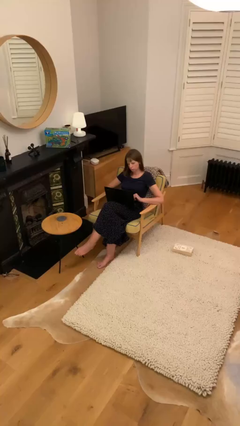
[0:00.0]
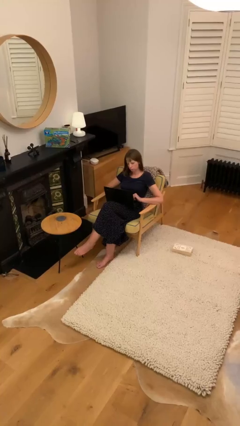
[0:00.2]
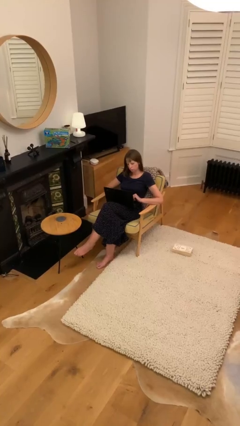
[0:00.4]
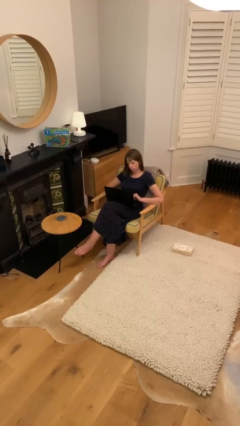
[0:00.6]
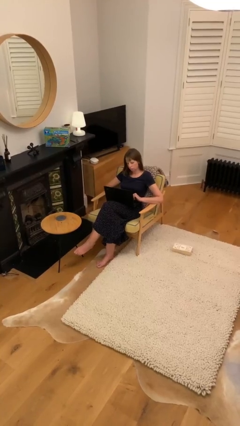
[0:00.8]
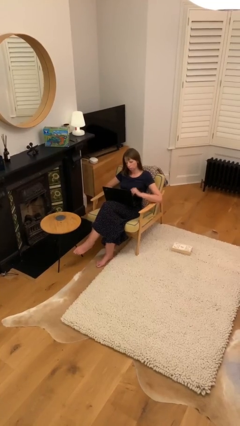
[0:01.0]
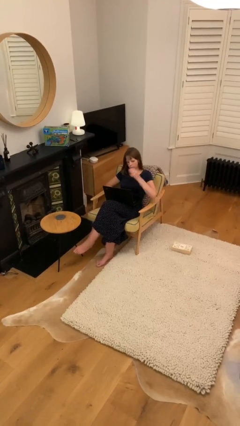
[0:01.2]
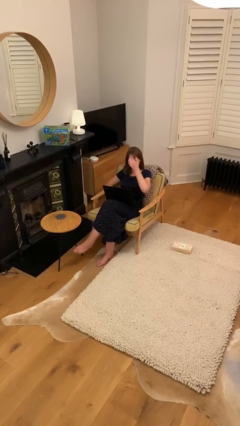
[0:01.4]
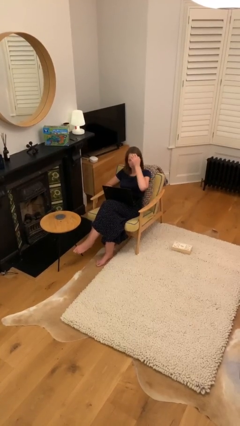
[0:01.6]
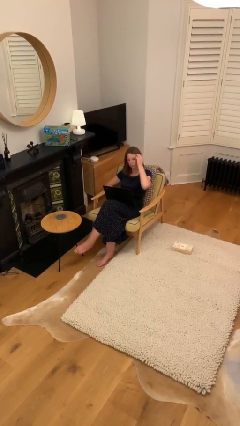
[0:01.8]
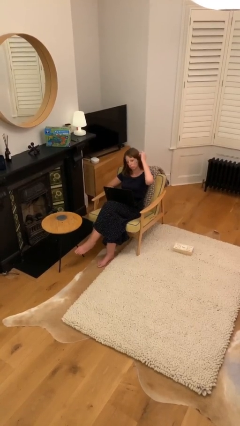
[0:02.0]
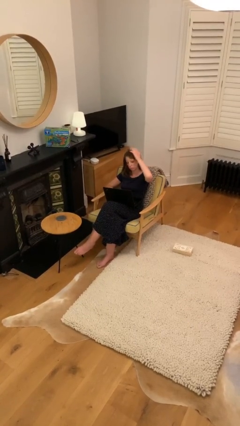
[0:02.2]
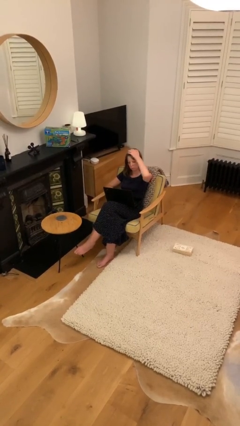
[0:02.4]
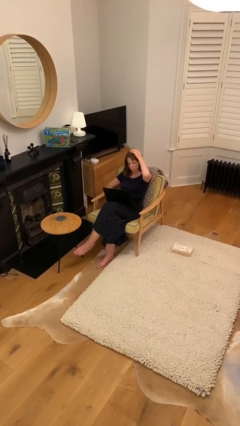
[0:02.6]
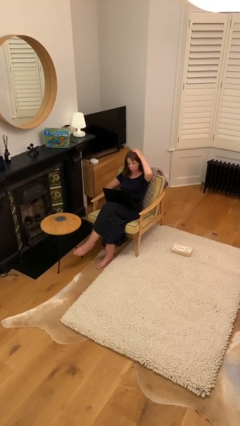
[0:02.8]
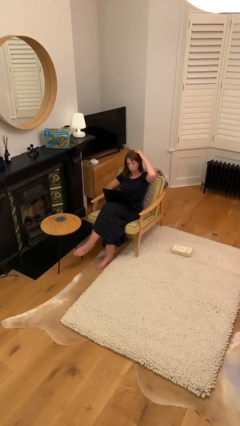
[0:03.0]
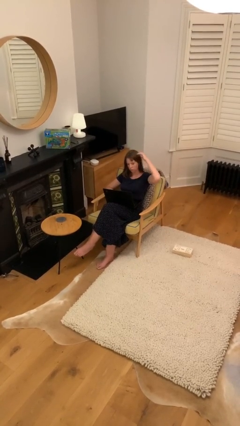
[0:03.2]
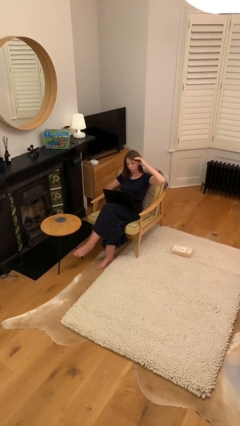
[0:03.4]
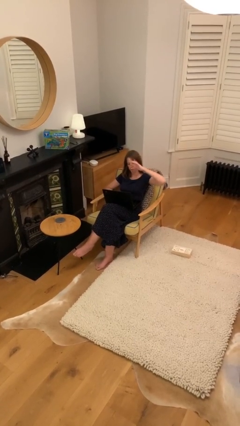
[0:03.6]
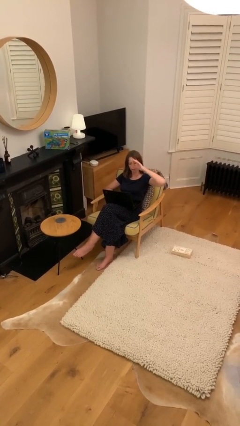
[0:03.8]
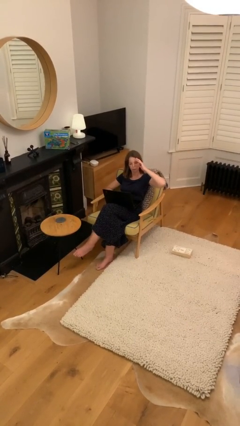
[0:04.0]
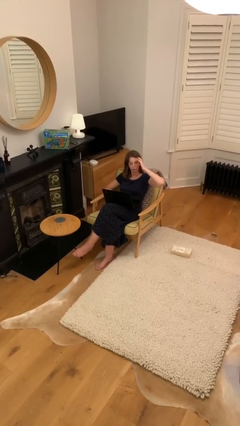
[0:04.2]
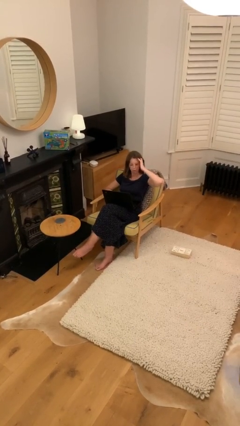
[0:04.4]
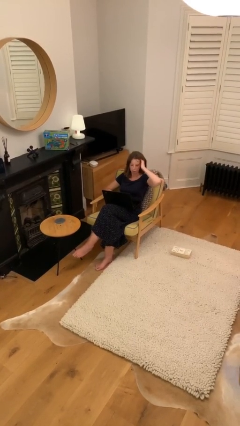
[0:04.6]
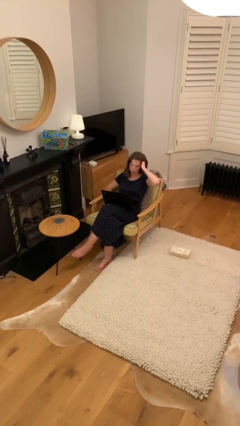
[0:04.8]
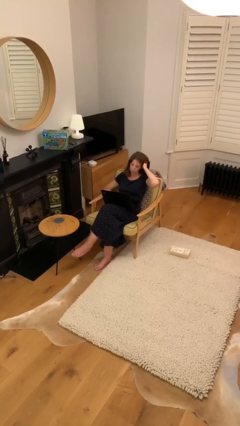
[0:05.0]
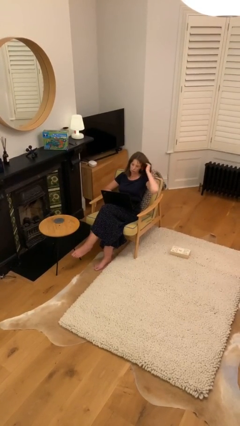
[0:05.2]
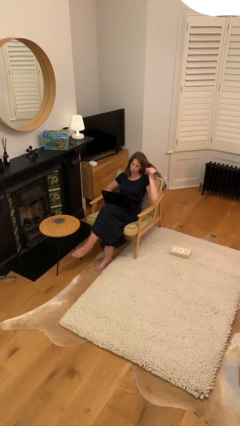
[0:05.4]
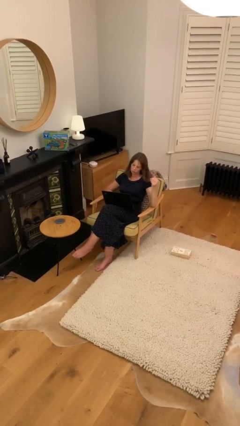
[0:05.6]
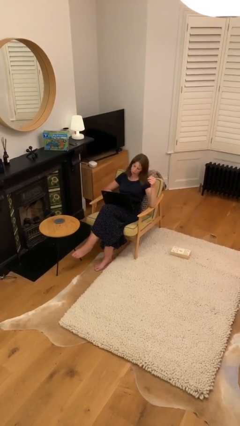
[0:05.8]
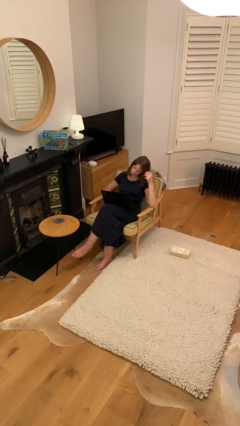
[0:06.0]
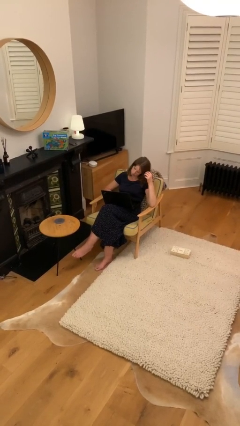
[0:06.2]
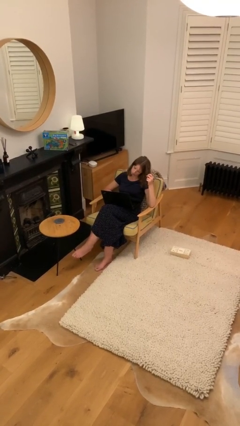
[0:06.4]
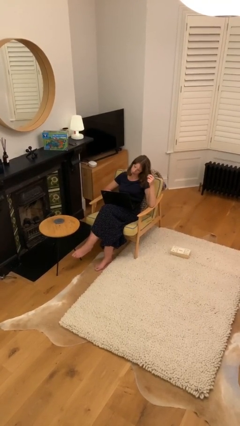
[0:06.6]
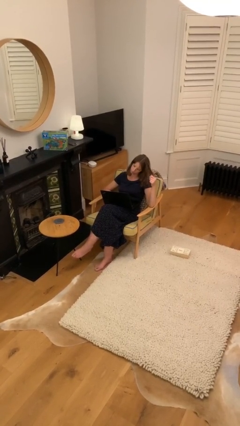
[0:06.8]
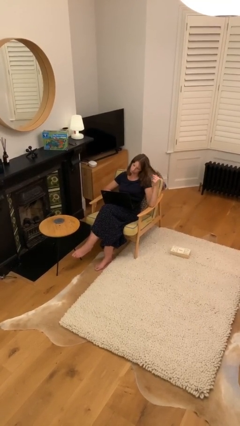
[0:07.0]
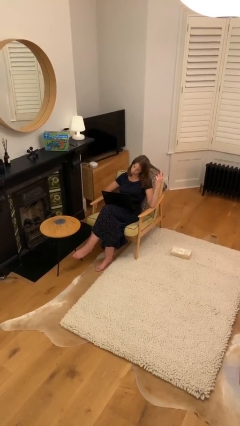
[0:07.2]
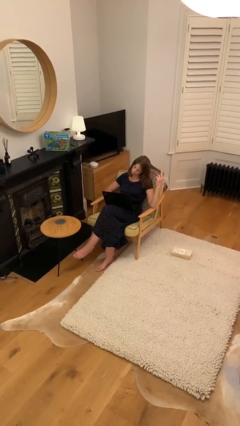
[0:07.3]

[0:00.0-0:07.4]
person interacts with laptop

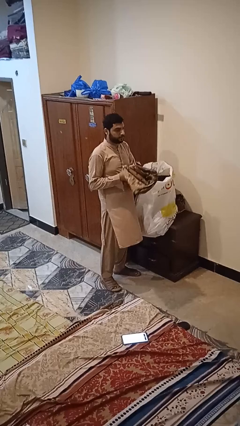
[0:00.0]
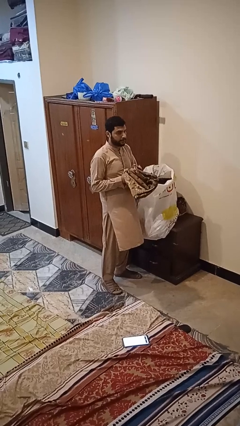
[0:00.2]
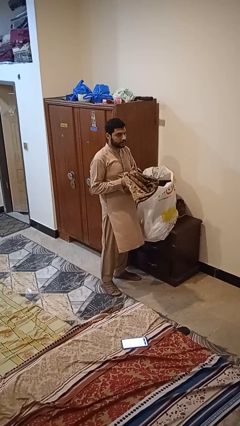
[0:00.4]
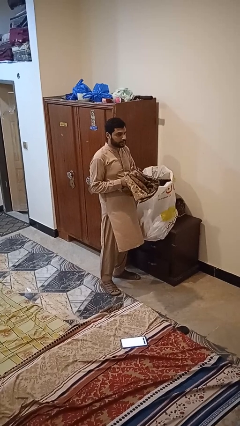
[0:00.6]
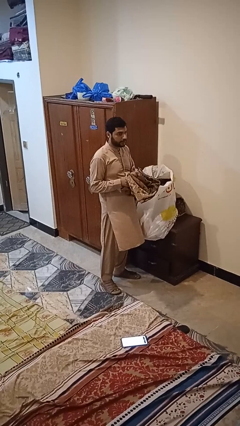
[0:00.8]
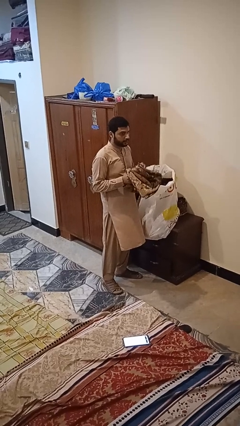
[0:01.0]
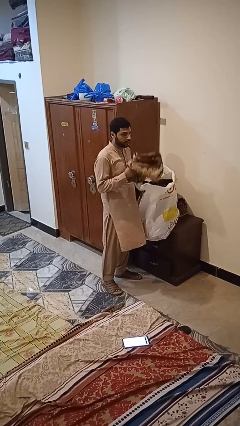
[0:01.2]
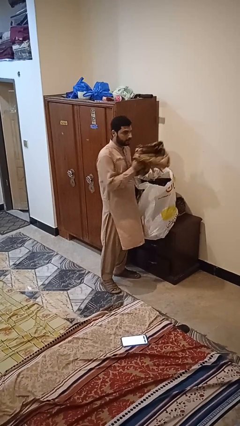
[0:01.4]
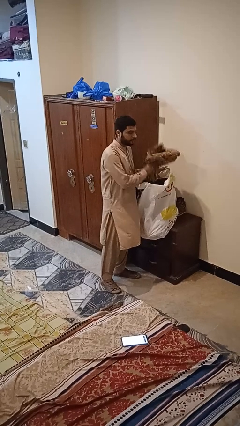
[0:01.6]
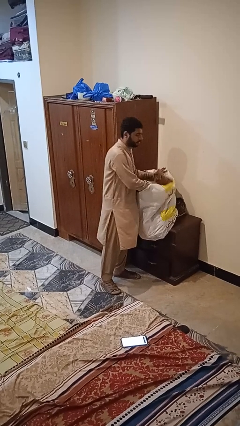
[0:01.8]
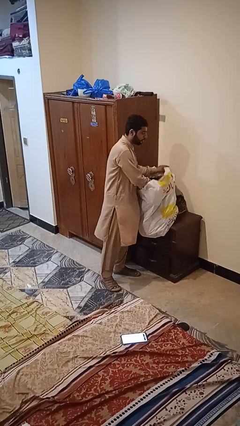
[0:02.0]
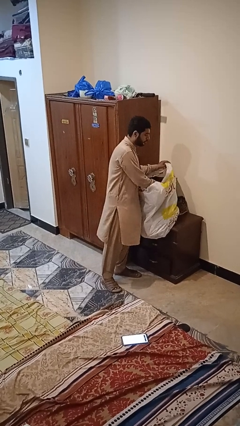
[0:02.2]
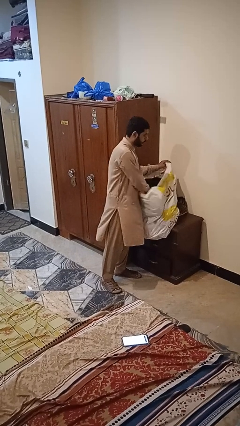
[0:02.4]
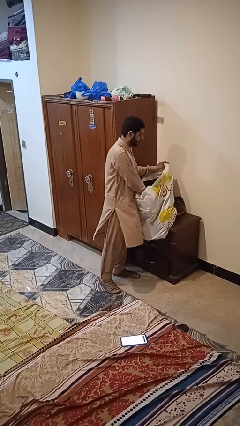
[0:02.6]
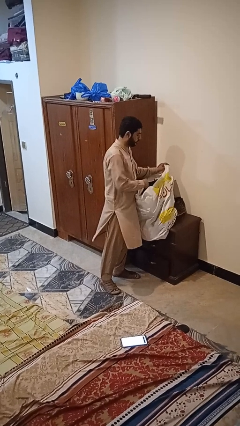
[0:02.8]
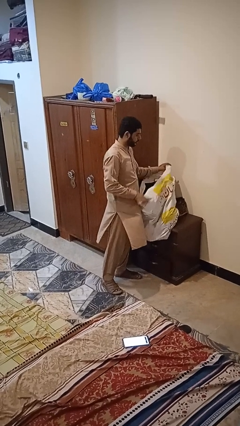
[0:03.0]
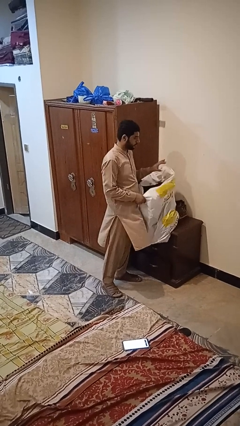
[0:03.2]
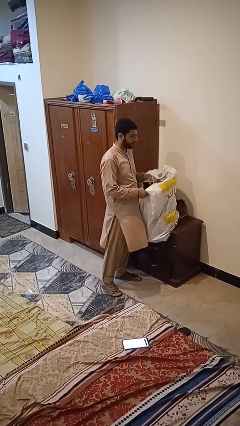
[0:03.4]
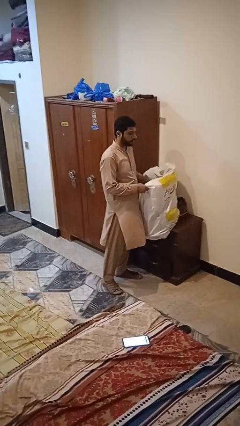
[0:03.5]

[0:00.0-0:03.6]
person puts object into bag

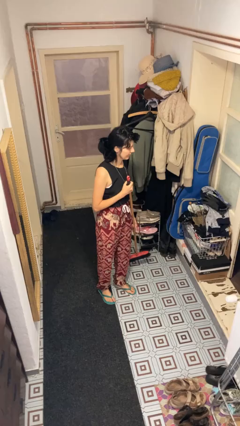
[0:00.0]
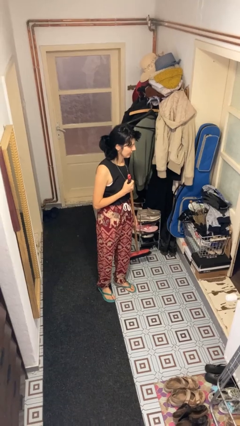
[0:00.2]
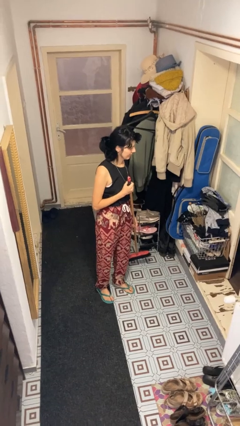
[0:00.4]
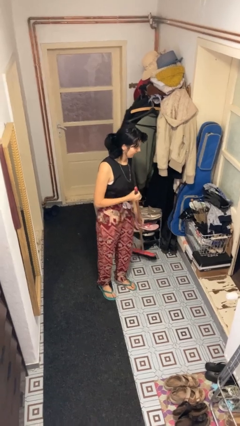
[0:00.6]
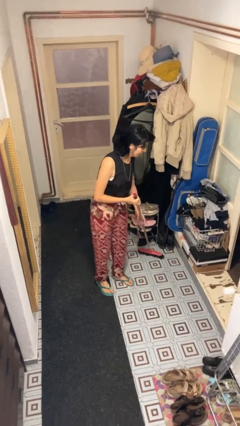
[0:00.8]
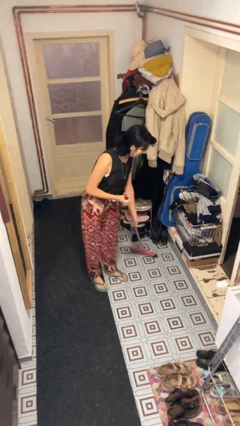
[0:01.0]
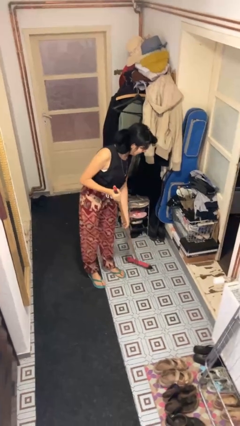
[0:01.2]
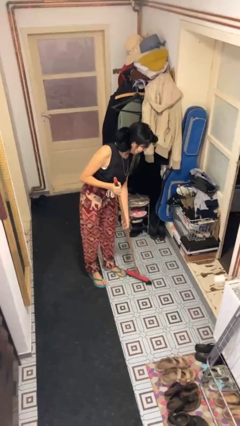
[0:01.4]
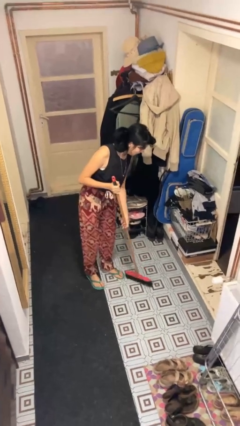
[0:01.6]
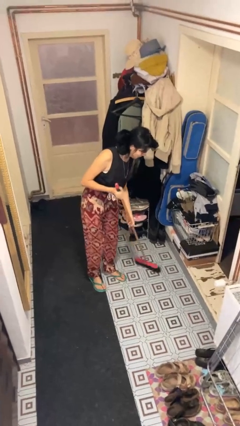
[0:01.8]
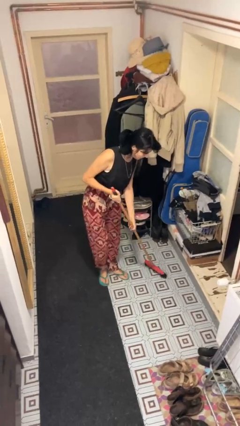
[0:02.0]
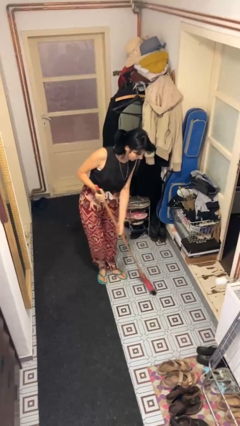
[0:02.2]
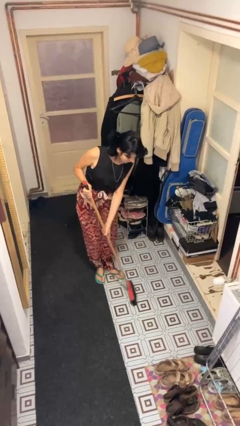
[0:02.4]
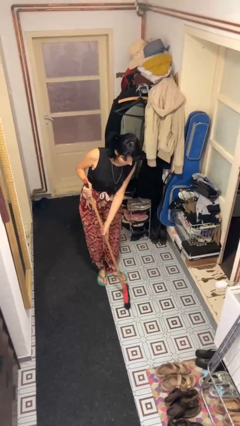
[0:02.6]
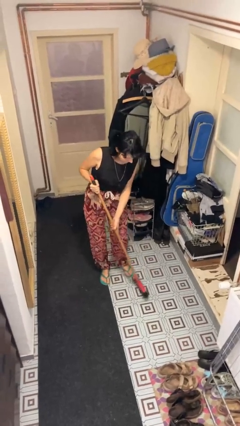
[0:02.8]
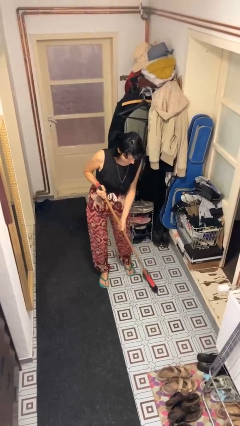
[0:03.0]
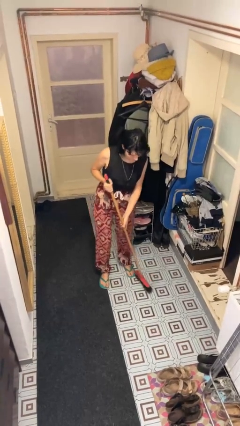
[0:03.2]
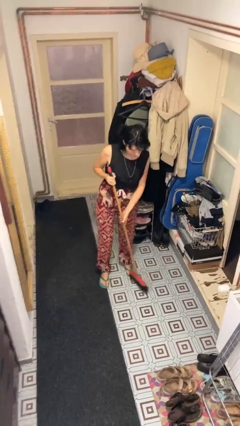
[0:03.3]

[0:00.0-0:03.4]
person sweeps floor

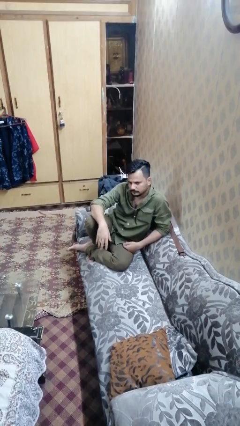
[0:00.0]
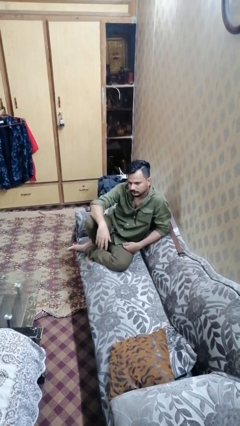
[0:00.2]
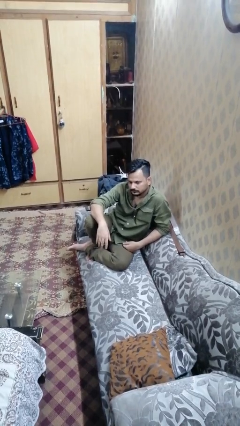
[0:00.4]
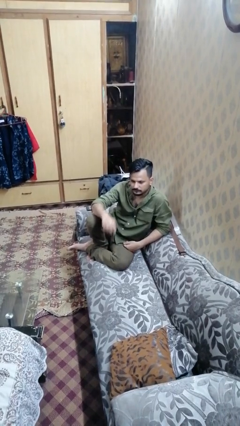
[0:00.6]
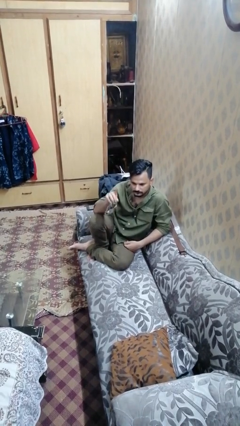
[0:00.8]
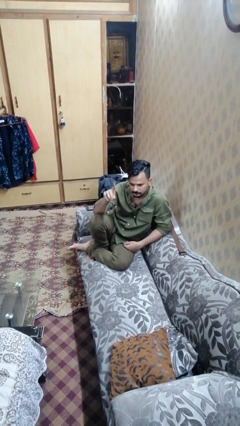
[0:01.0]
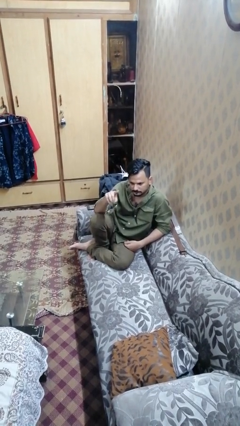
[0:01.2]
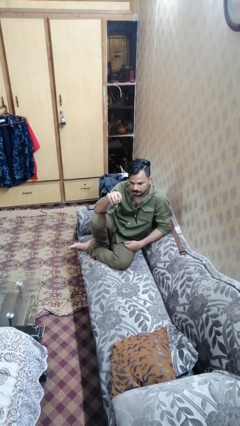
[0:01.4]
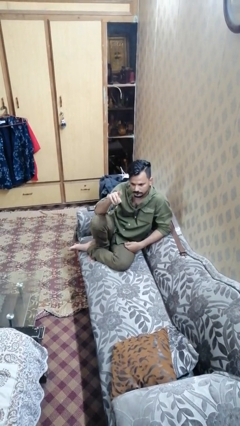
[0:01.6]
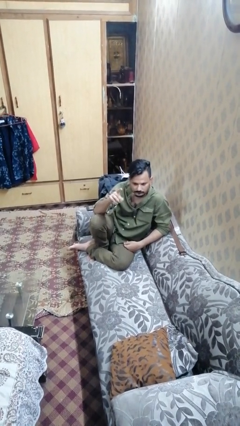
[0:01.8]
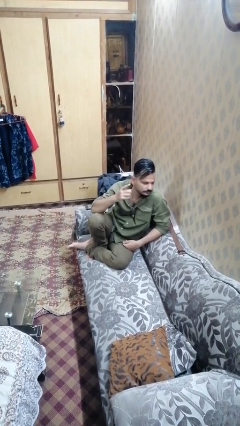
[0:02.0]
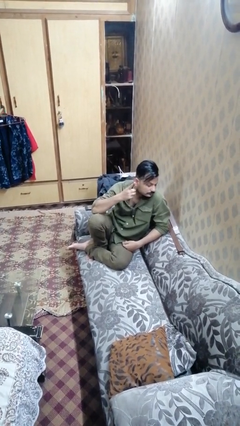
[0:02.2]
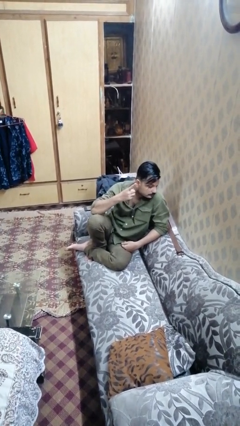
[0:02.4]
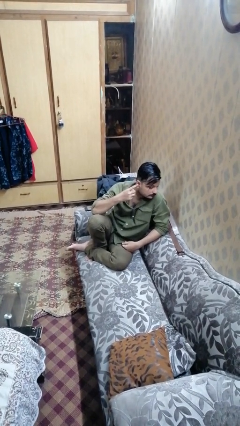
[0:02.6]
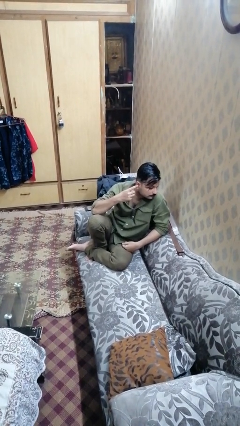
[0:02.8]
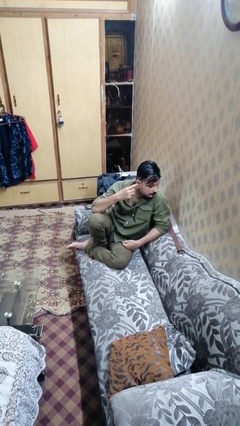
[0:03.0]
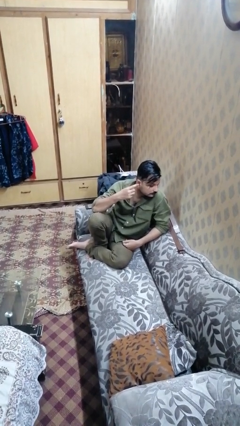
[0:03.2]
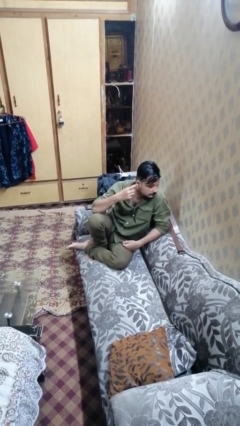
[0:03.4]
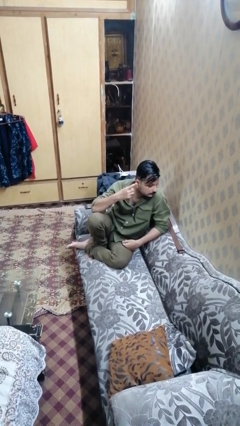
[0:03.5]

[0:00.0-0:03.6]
person gestures listen closely
